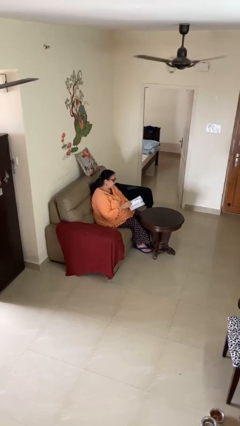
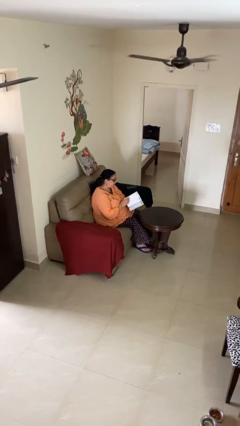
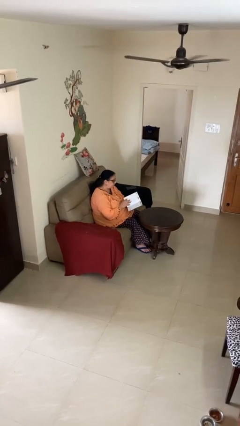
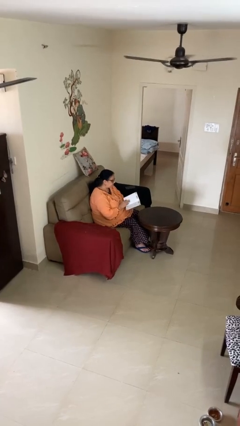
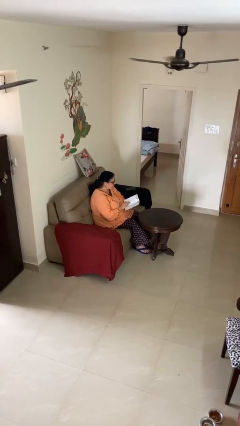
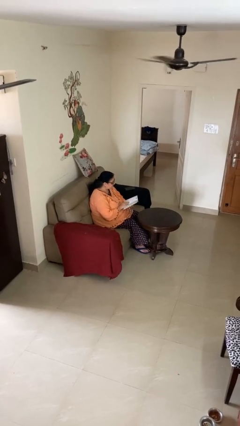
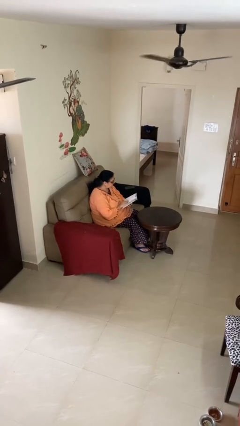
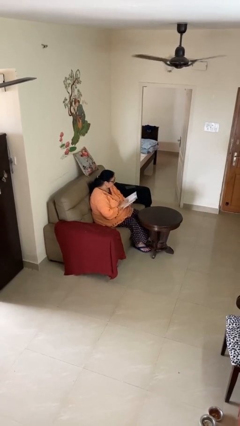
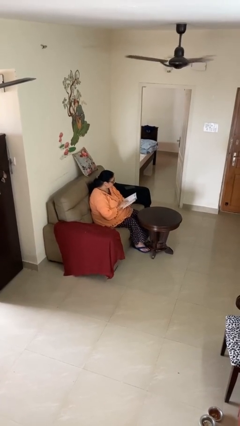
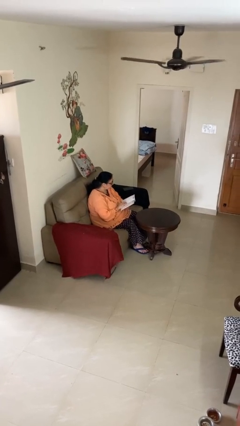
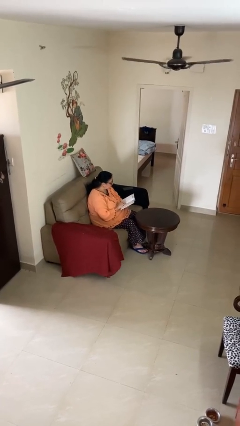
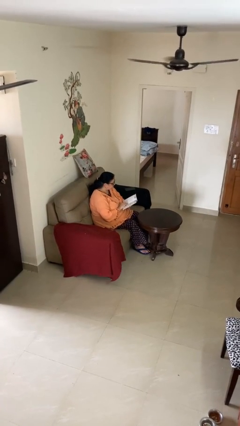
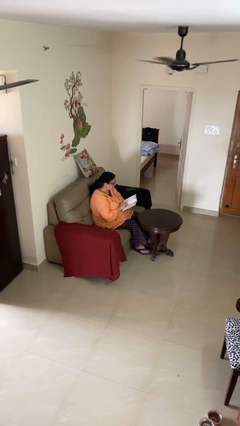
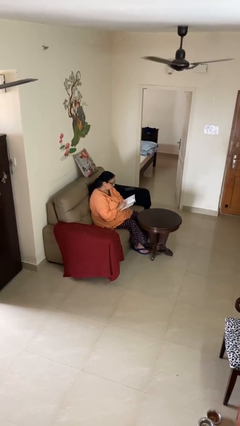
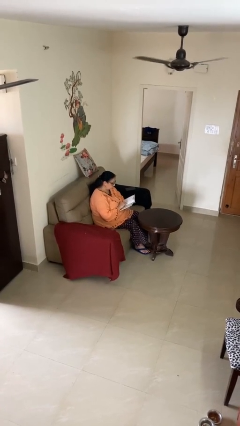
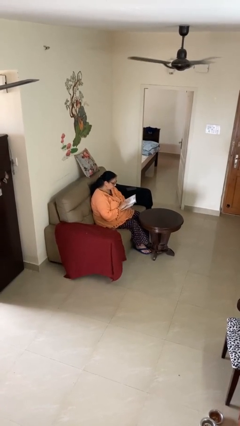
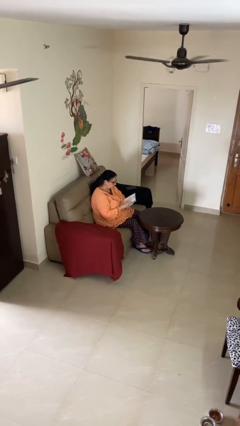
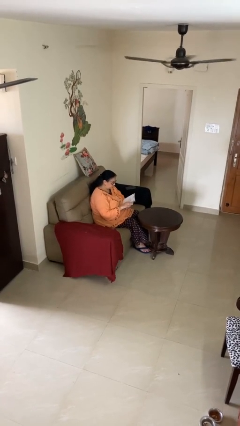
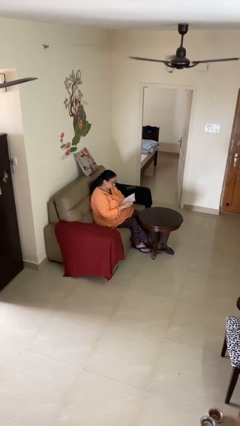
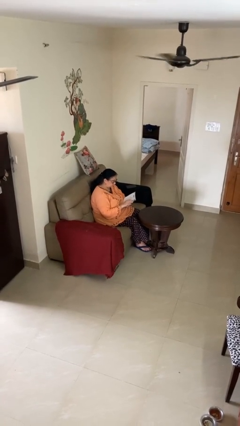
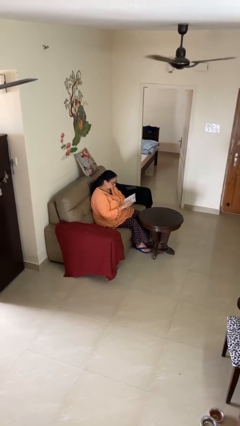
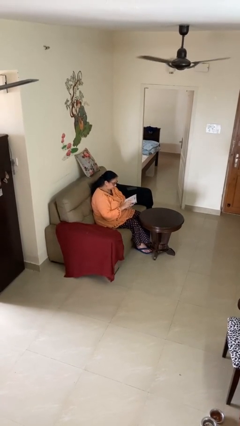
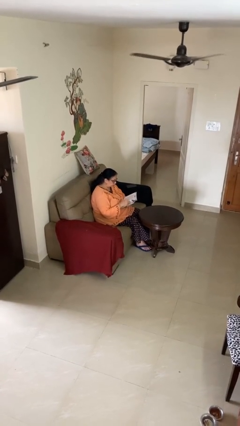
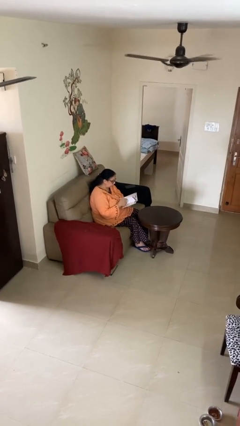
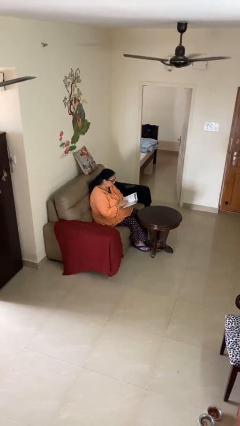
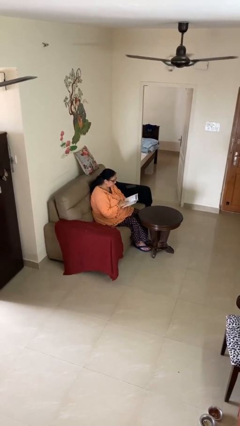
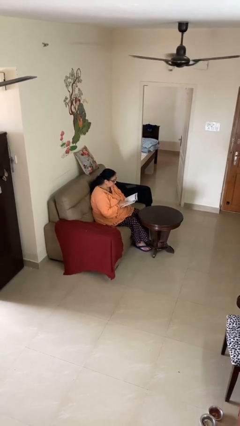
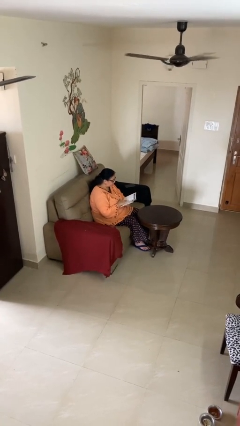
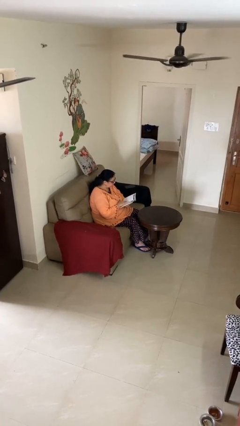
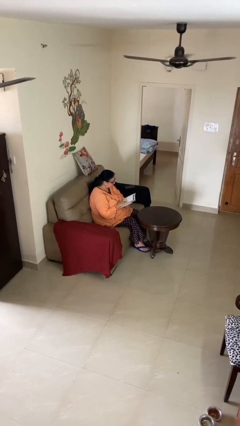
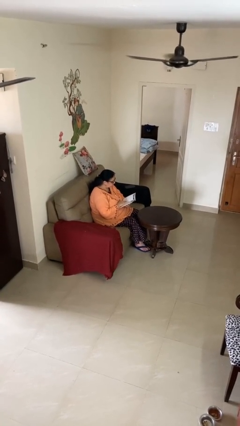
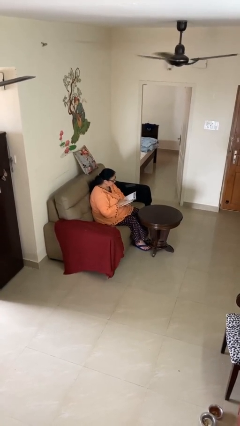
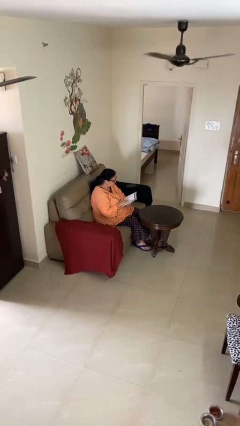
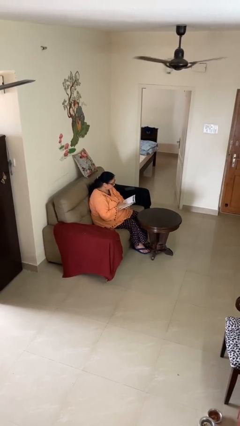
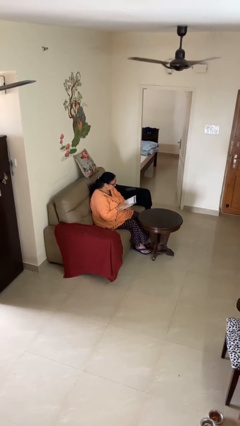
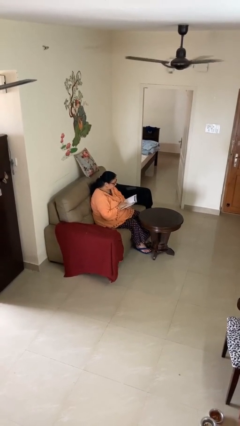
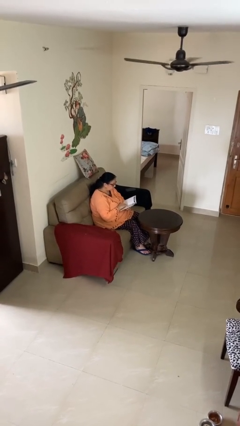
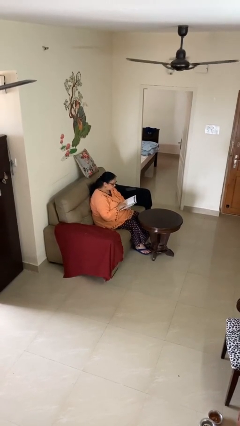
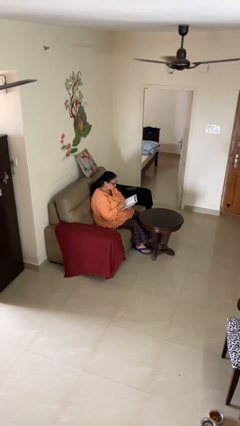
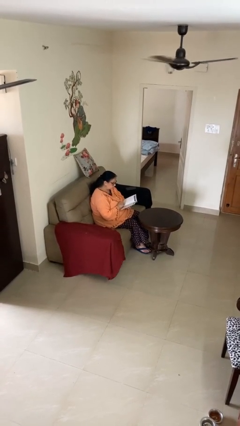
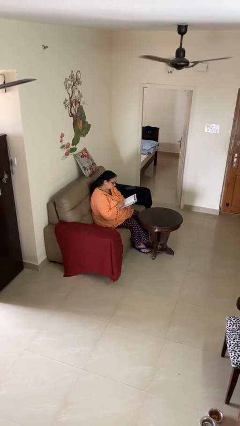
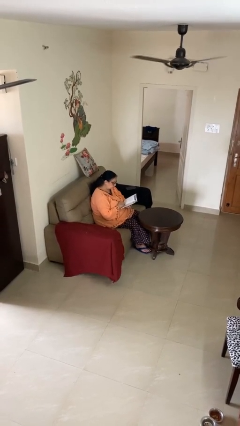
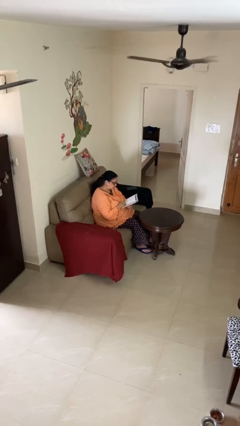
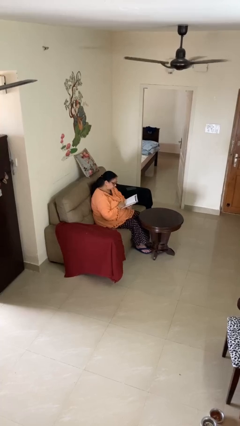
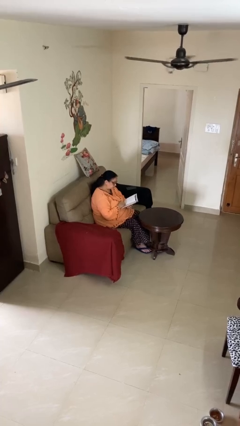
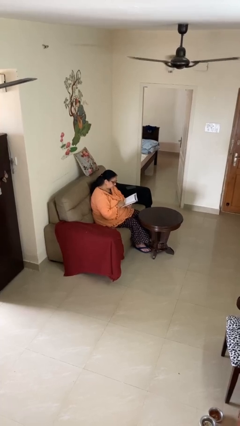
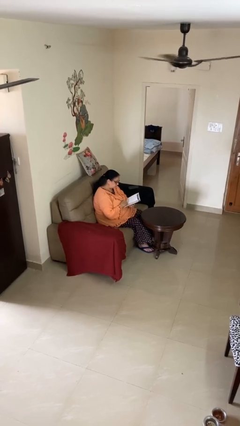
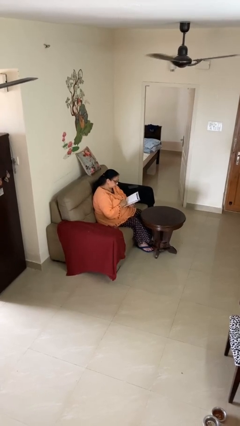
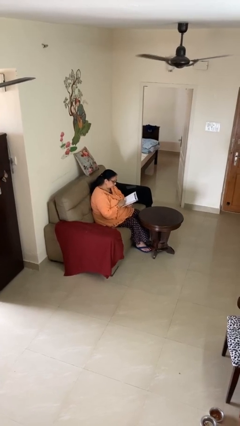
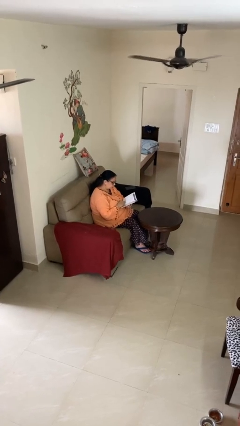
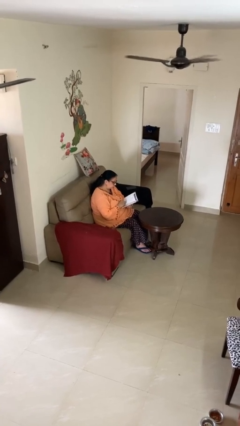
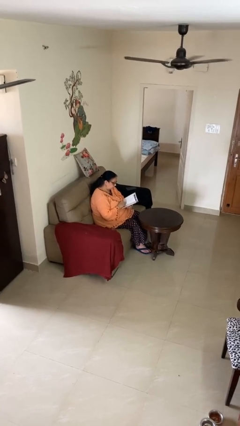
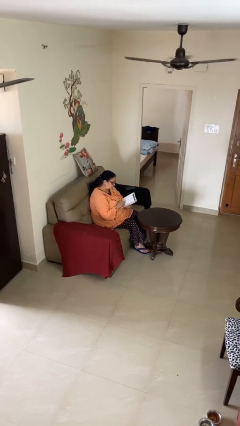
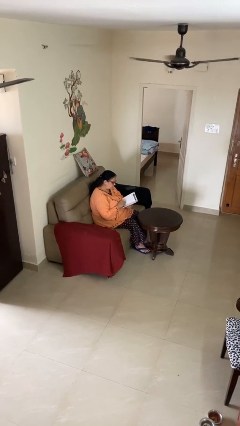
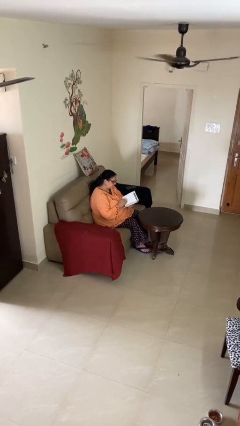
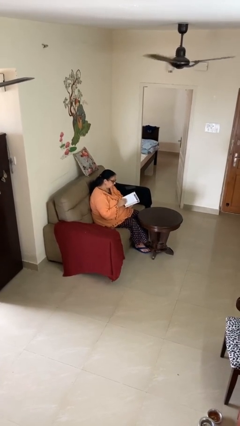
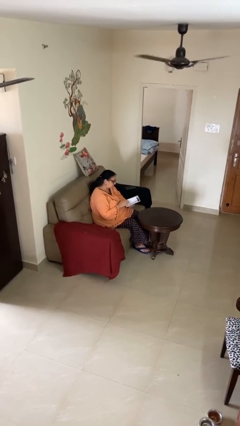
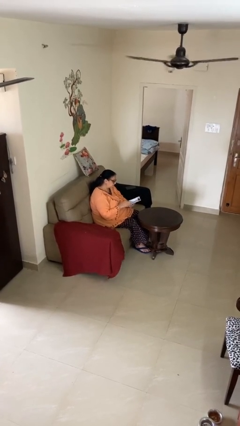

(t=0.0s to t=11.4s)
person reads document

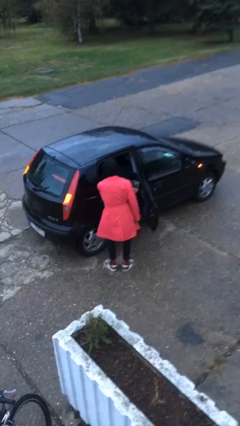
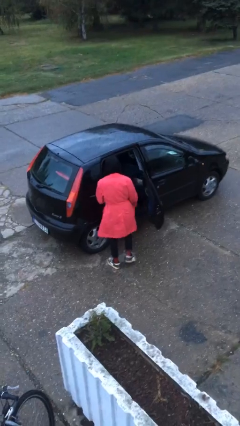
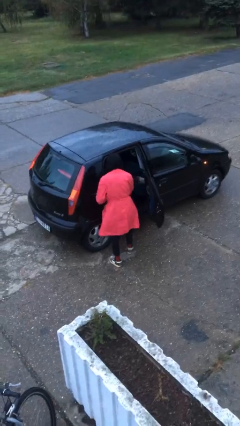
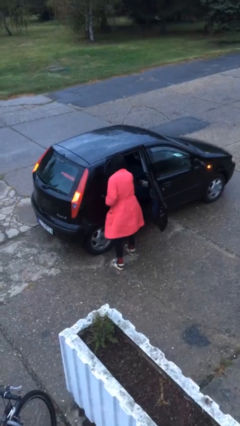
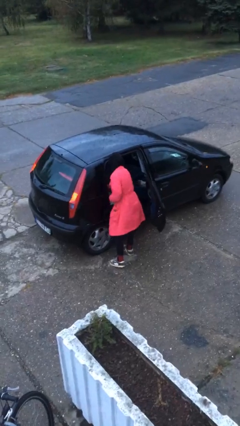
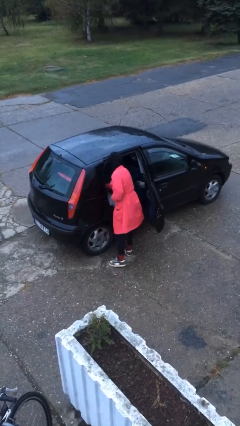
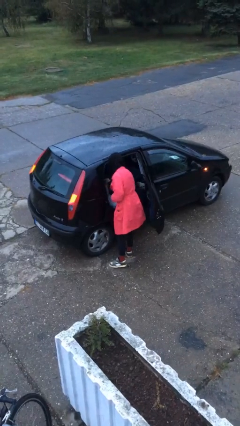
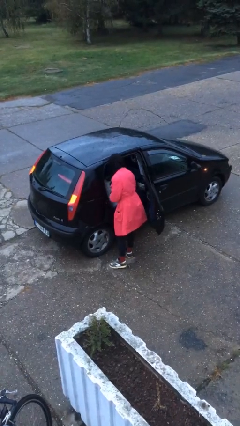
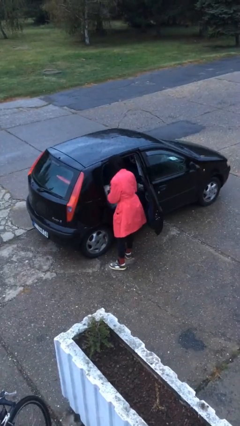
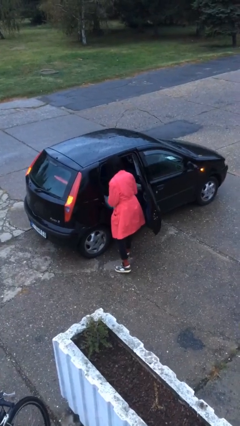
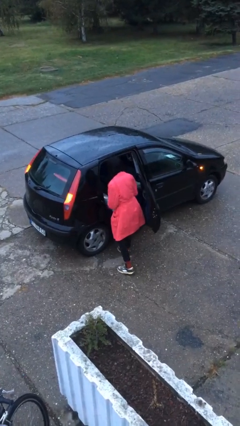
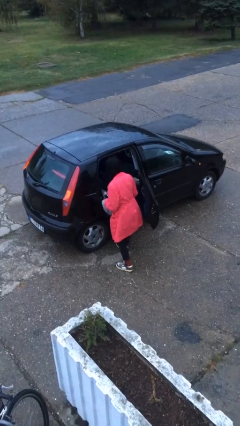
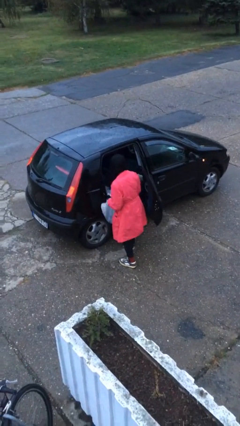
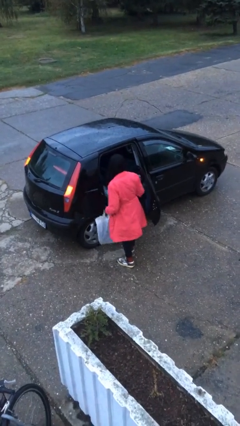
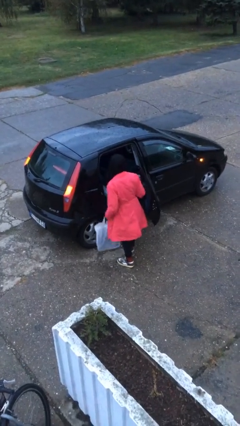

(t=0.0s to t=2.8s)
person unloads car

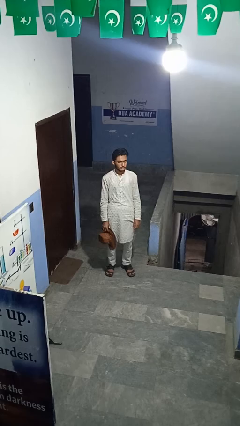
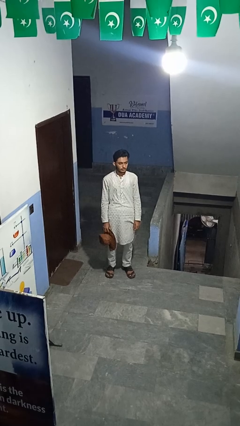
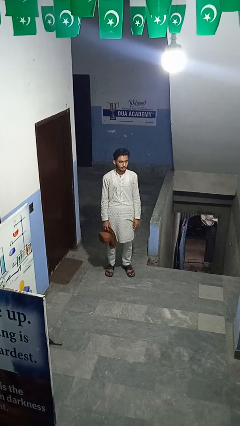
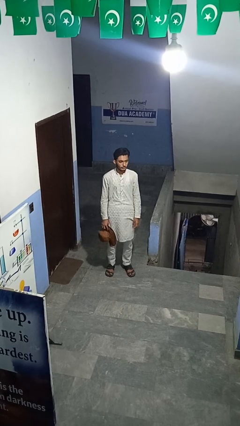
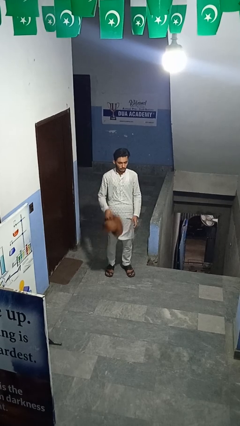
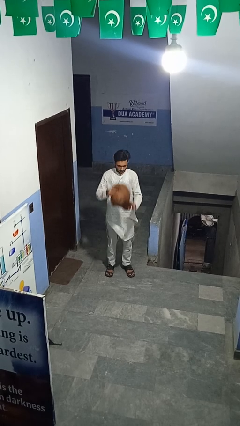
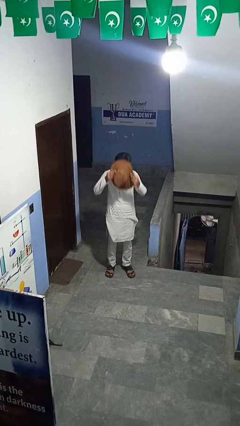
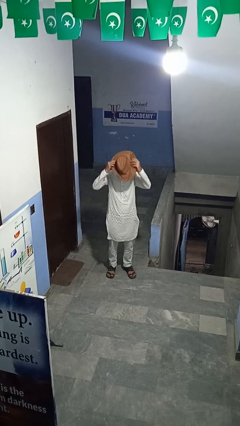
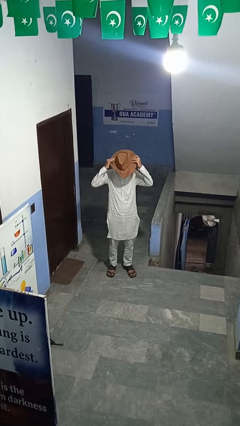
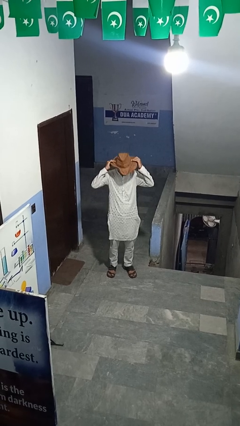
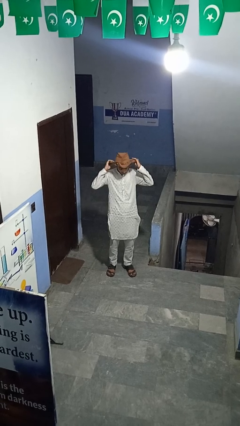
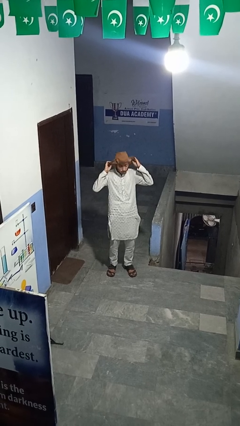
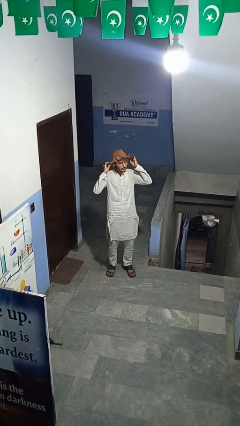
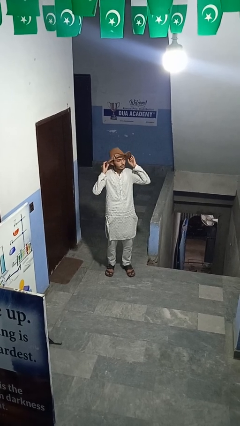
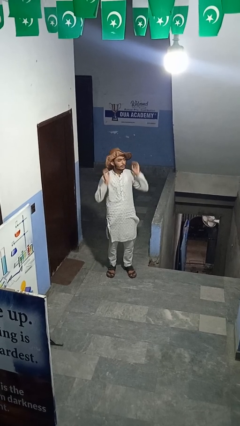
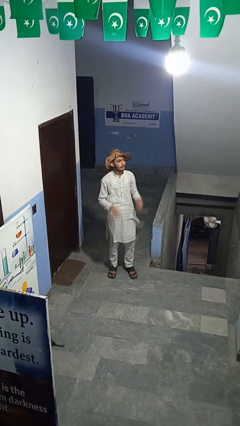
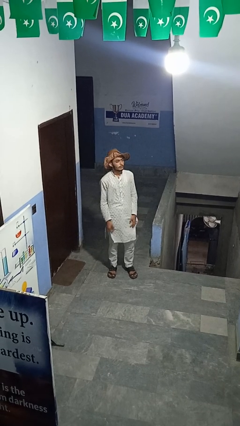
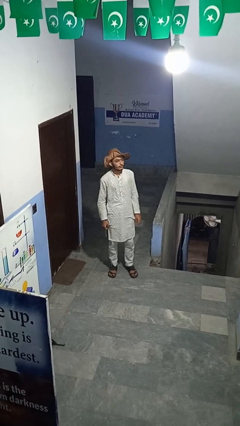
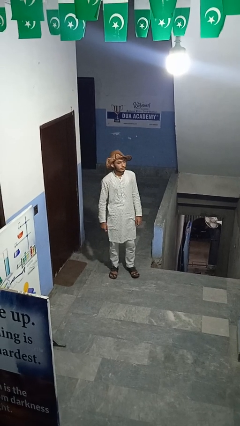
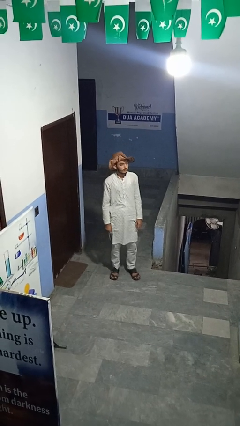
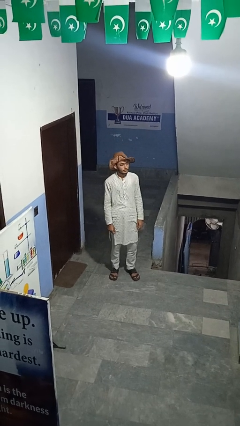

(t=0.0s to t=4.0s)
person puts on hat

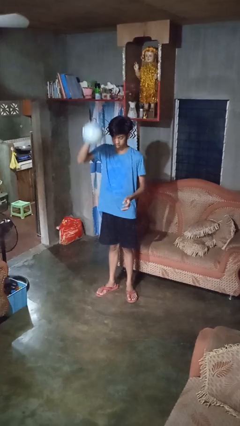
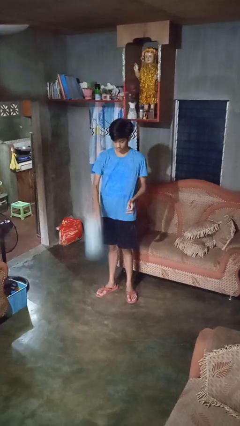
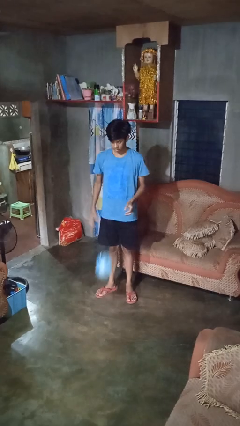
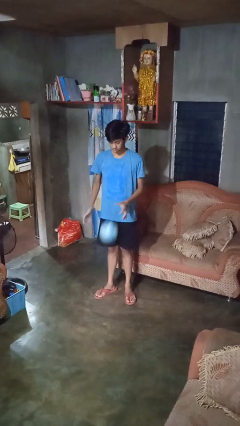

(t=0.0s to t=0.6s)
person bounces ball on floor
